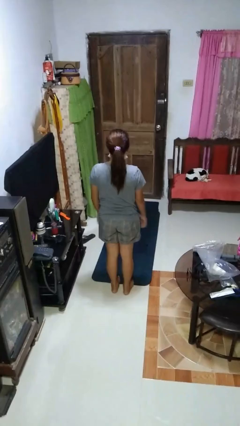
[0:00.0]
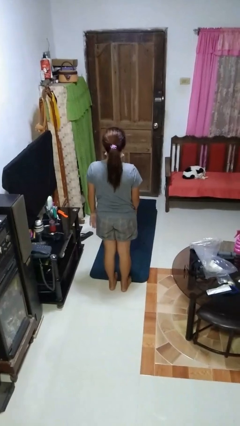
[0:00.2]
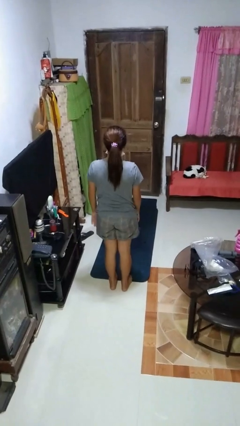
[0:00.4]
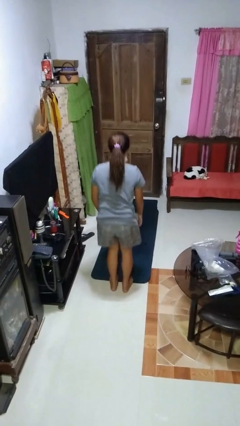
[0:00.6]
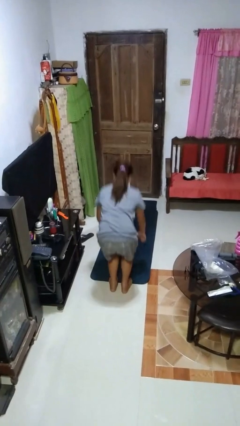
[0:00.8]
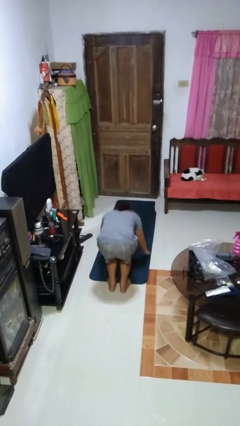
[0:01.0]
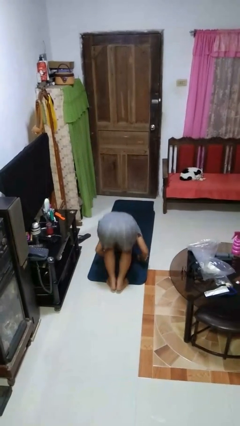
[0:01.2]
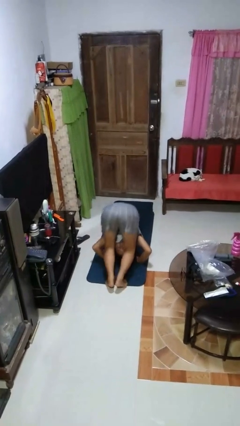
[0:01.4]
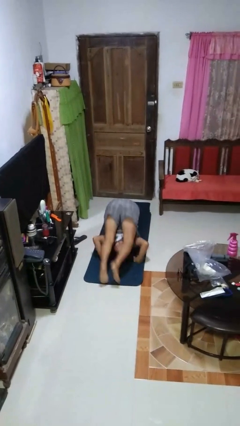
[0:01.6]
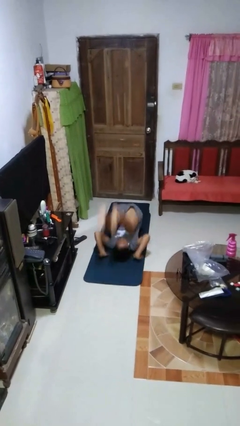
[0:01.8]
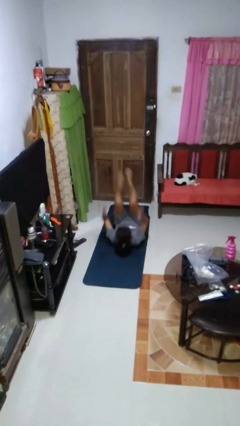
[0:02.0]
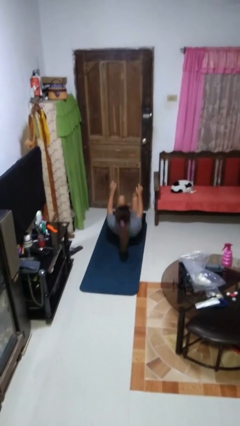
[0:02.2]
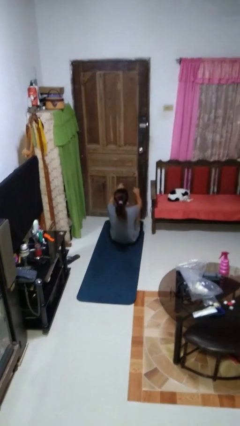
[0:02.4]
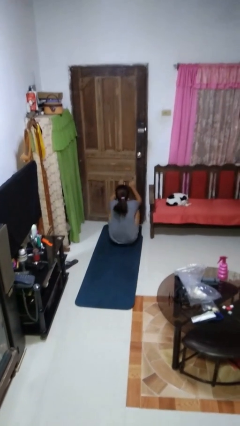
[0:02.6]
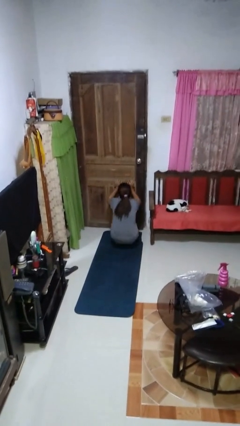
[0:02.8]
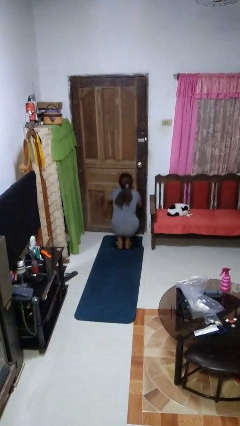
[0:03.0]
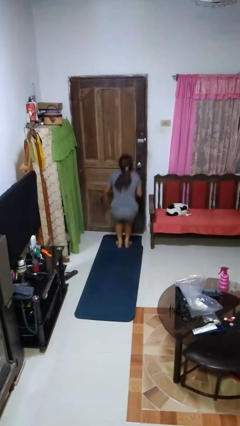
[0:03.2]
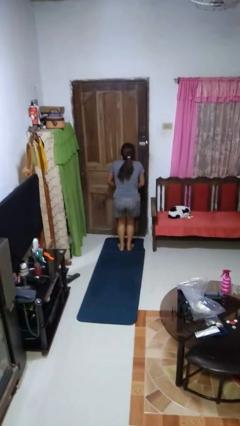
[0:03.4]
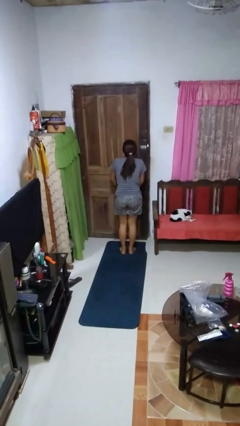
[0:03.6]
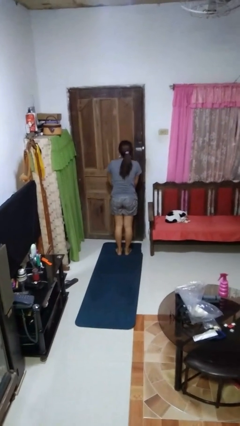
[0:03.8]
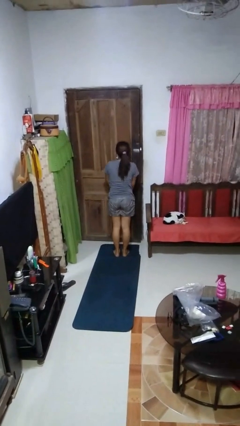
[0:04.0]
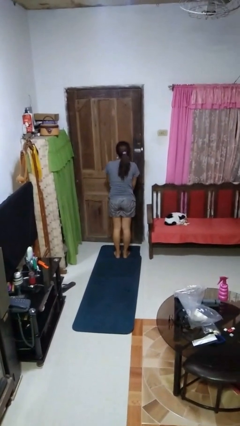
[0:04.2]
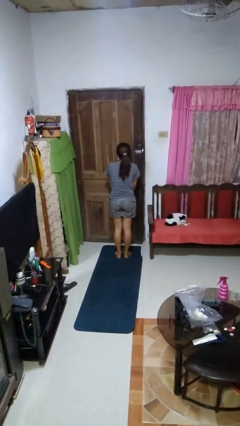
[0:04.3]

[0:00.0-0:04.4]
person somersaults

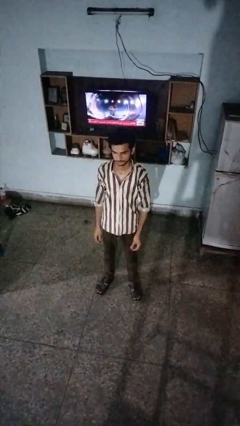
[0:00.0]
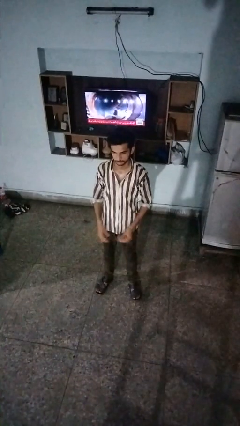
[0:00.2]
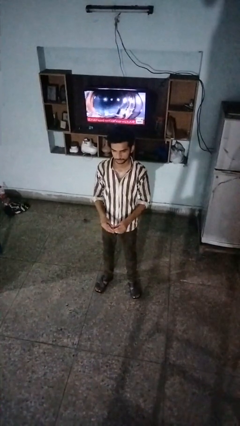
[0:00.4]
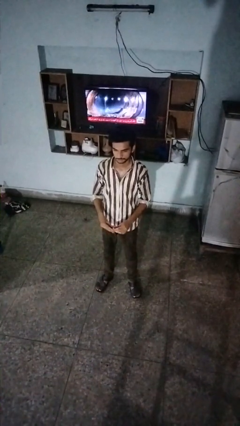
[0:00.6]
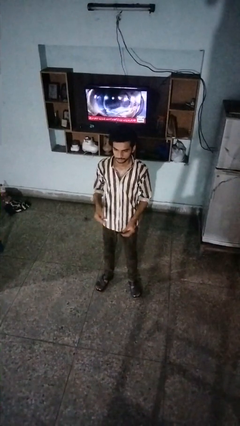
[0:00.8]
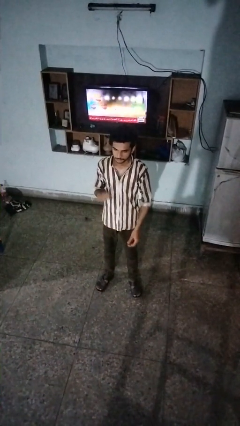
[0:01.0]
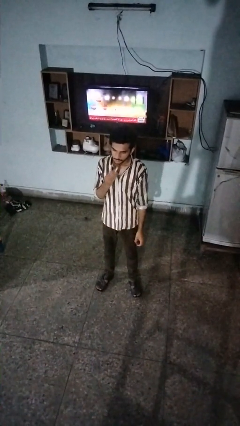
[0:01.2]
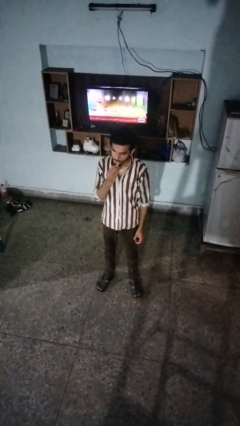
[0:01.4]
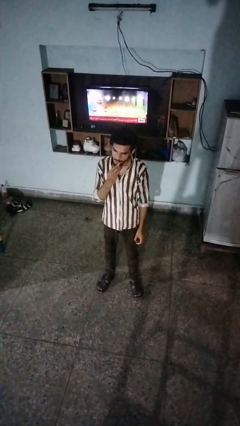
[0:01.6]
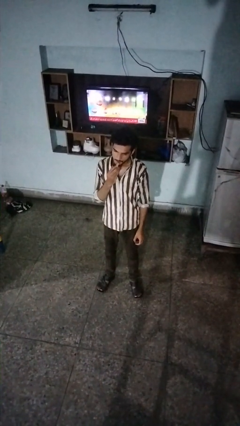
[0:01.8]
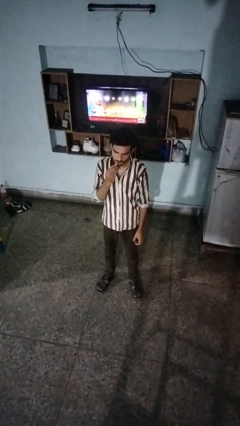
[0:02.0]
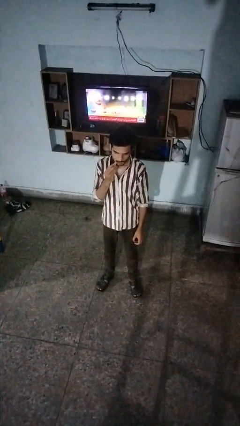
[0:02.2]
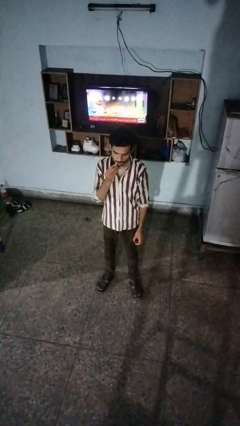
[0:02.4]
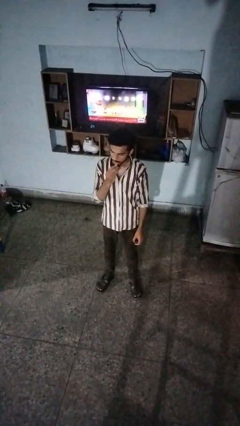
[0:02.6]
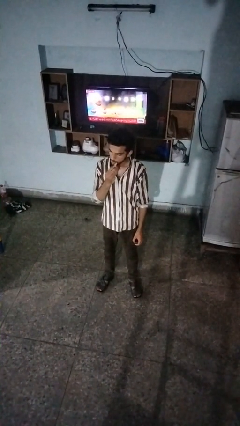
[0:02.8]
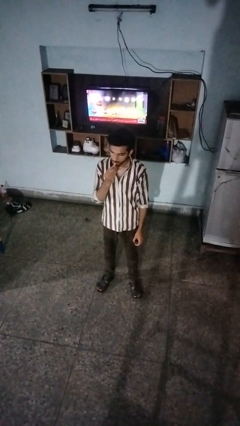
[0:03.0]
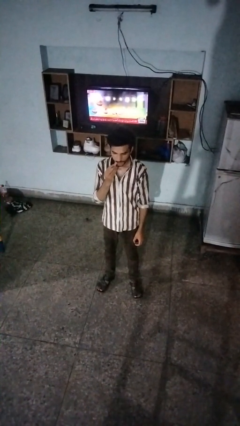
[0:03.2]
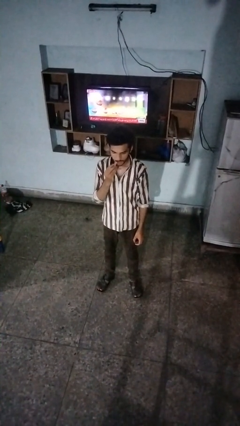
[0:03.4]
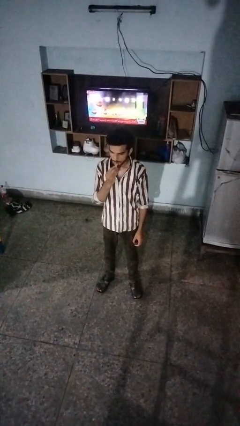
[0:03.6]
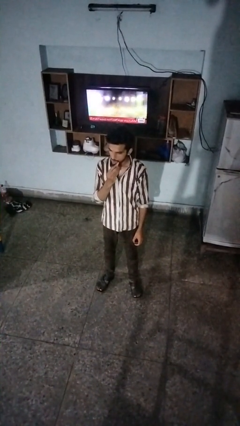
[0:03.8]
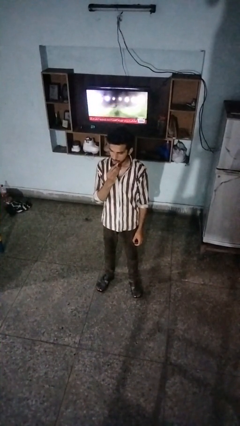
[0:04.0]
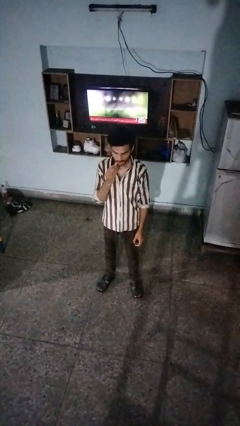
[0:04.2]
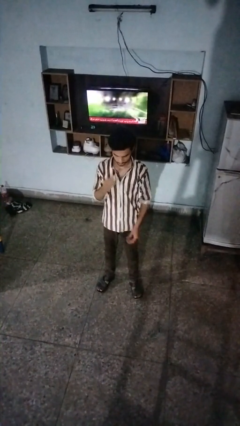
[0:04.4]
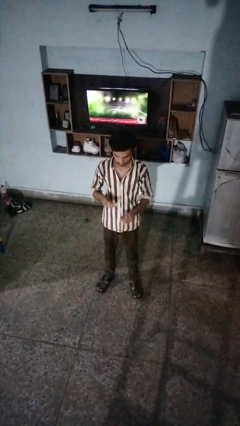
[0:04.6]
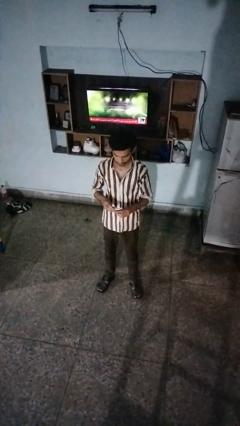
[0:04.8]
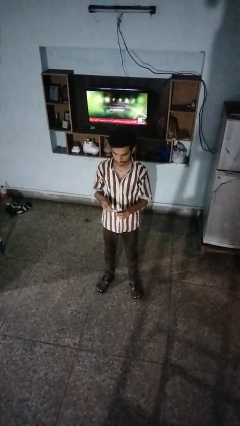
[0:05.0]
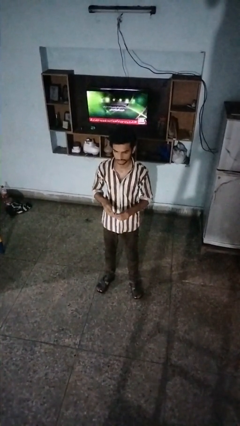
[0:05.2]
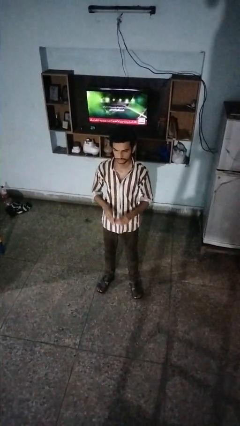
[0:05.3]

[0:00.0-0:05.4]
person applies lip makeup

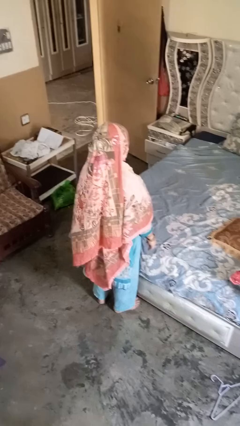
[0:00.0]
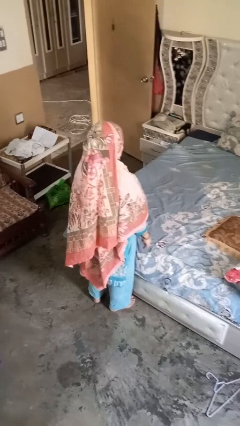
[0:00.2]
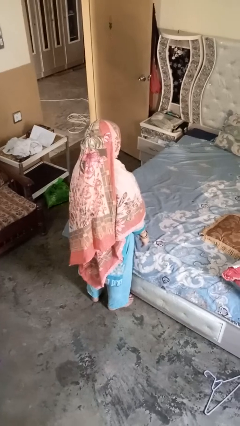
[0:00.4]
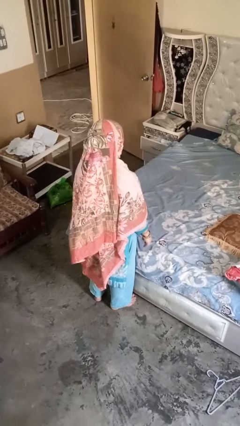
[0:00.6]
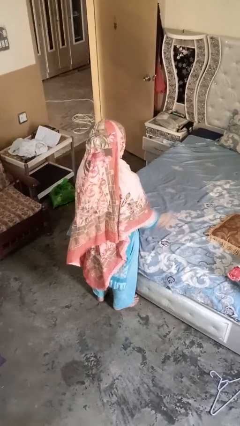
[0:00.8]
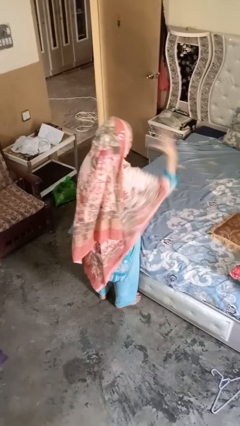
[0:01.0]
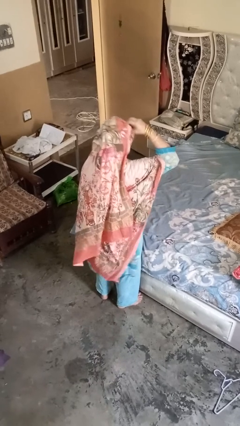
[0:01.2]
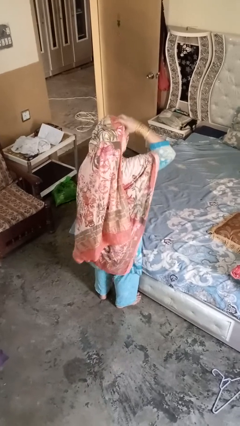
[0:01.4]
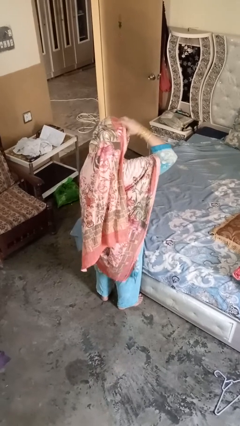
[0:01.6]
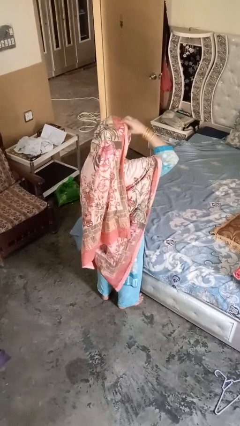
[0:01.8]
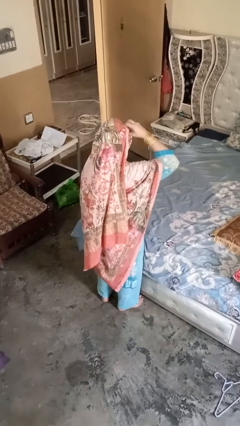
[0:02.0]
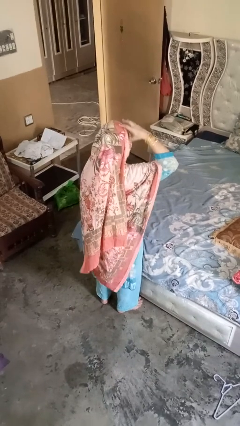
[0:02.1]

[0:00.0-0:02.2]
person strokes hair

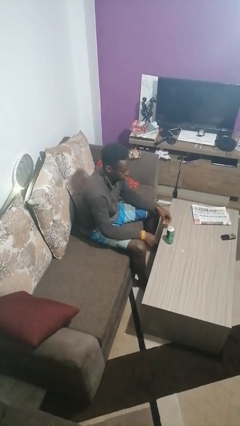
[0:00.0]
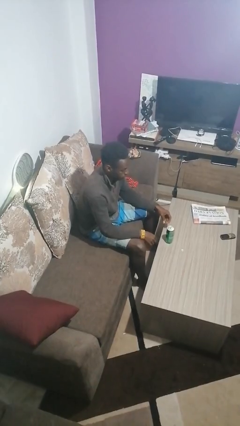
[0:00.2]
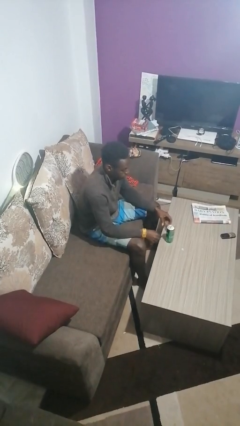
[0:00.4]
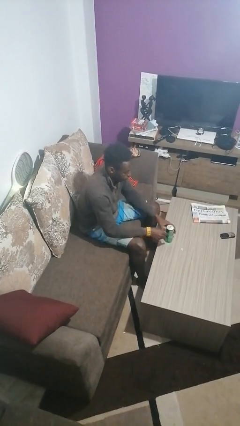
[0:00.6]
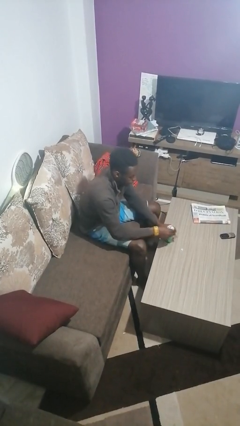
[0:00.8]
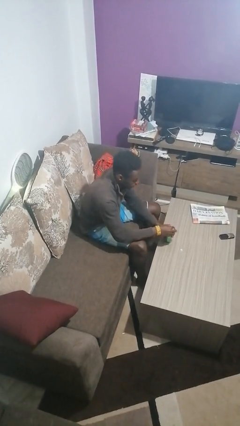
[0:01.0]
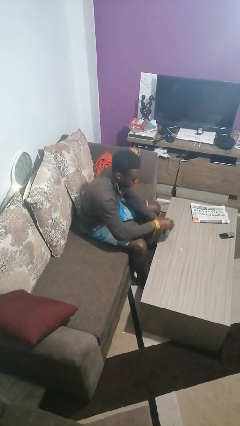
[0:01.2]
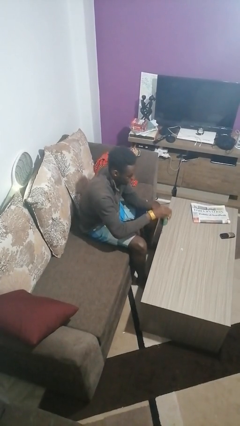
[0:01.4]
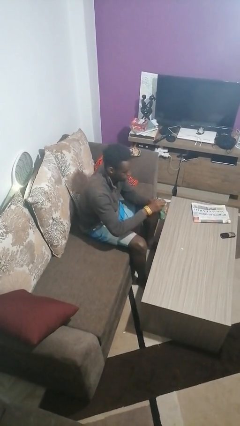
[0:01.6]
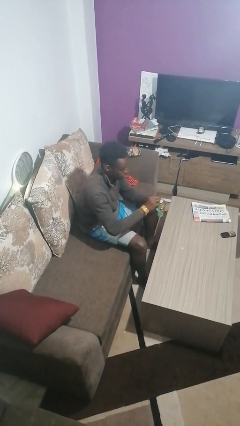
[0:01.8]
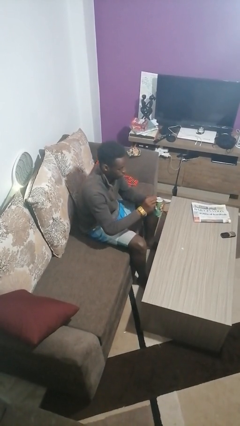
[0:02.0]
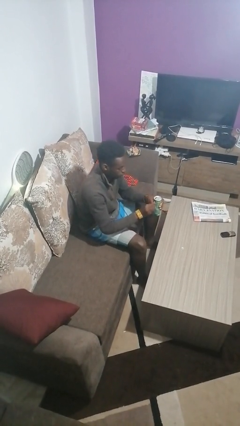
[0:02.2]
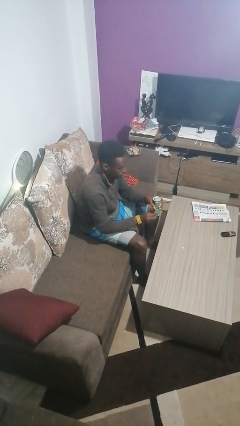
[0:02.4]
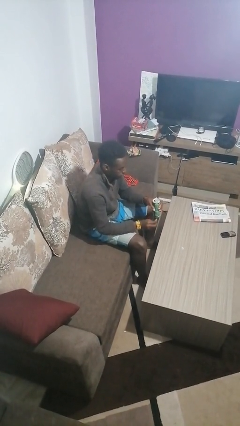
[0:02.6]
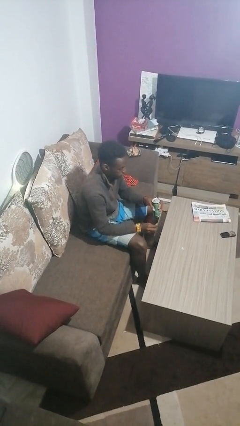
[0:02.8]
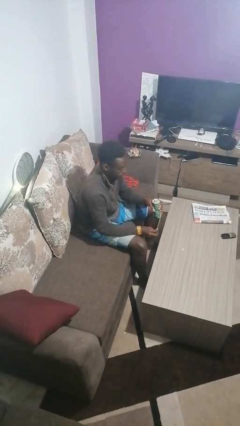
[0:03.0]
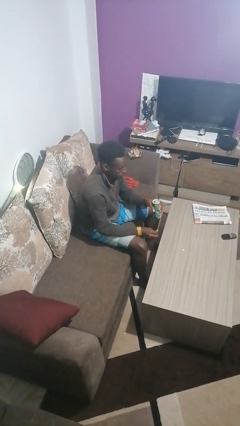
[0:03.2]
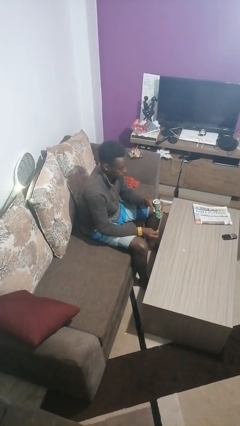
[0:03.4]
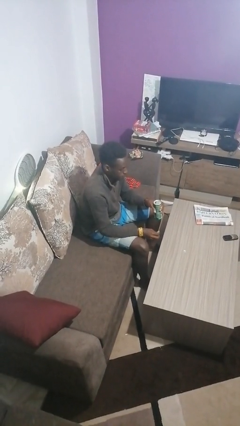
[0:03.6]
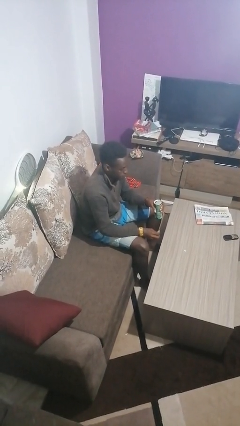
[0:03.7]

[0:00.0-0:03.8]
person opens beverage can

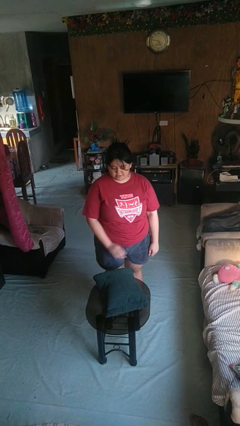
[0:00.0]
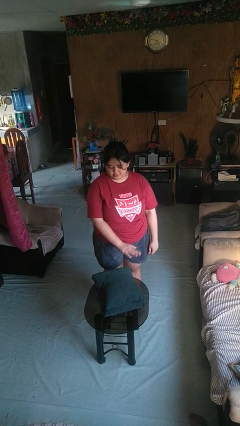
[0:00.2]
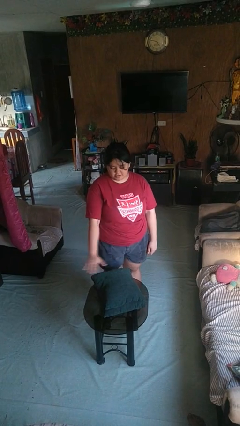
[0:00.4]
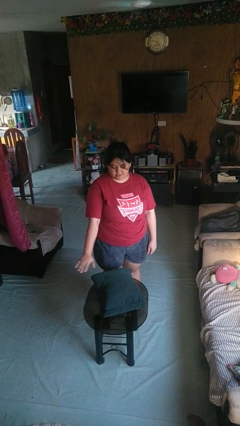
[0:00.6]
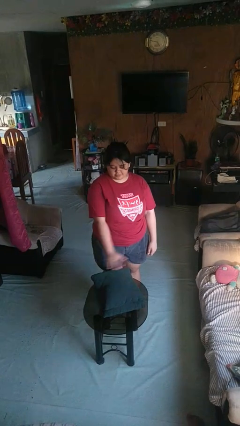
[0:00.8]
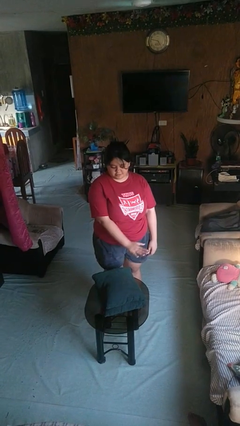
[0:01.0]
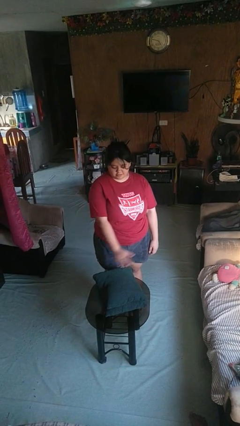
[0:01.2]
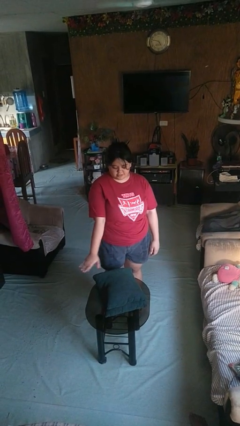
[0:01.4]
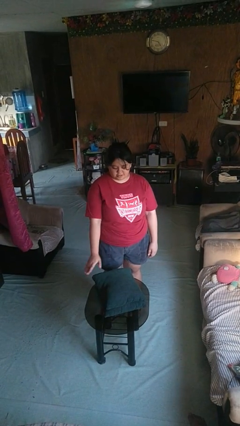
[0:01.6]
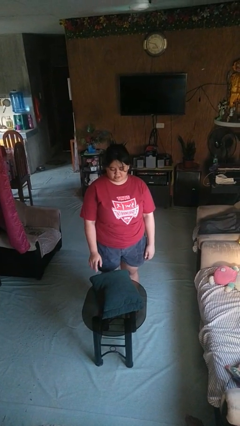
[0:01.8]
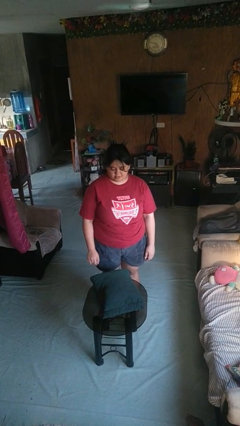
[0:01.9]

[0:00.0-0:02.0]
person waves hand over object
